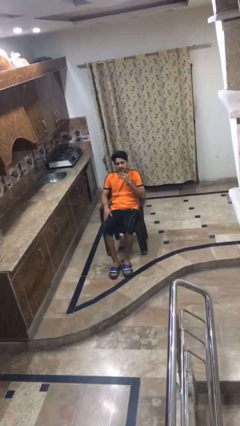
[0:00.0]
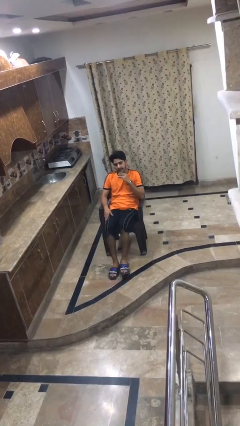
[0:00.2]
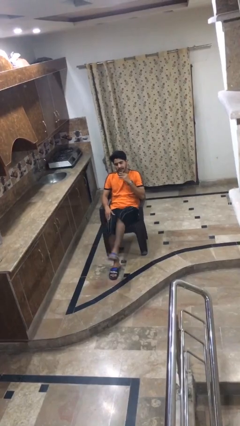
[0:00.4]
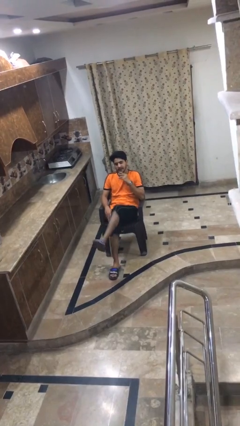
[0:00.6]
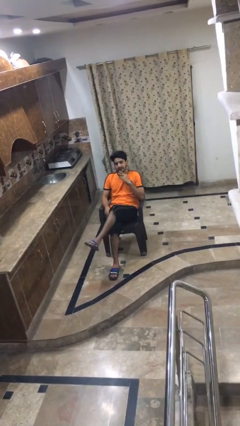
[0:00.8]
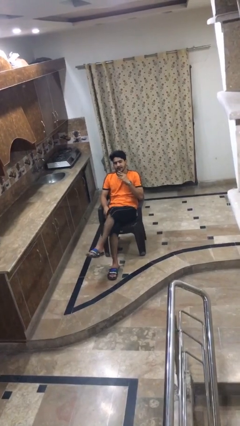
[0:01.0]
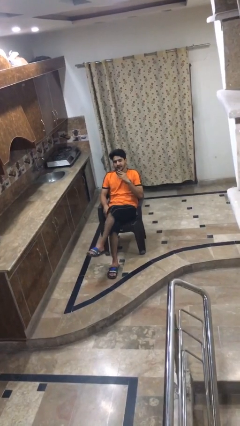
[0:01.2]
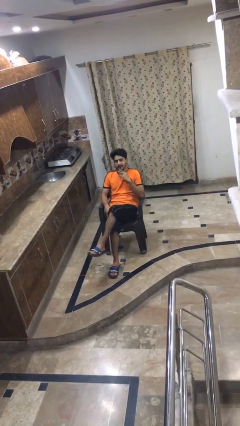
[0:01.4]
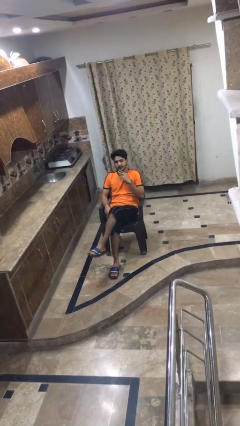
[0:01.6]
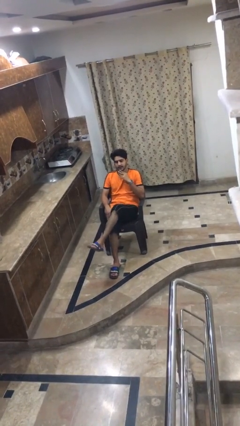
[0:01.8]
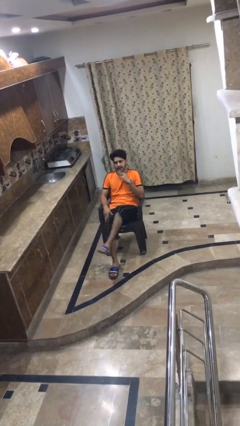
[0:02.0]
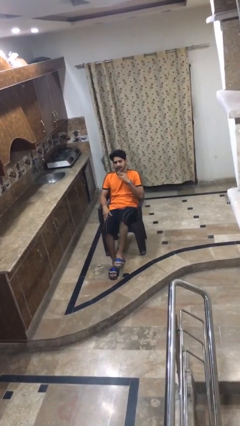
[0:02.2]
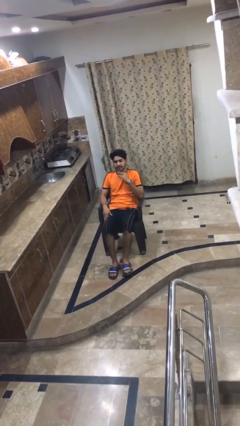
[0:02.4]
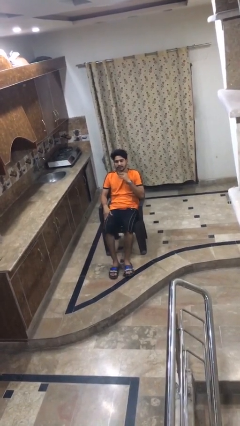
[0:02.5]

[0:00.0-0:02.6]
person crosses legs

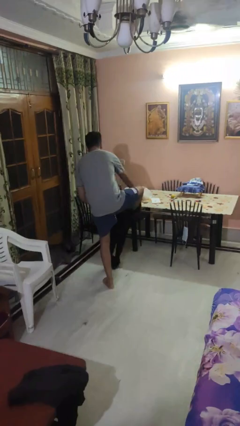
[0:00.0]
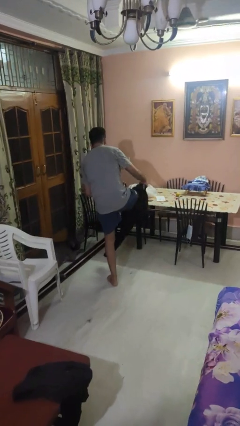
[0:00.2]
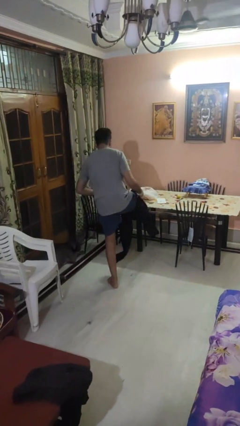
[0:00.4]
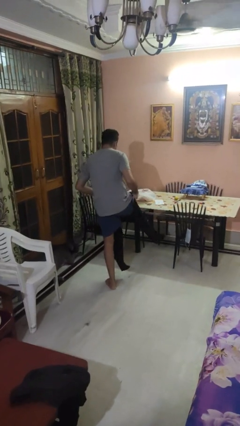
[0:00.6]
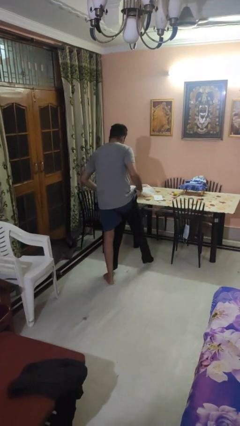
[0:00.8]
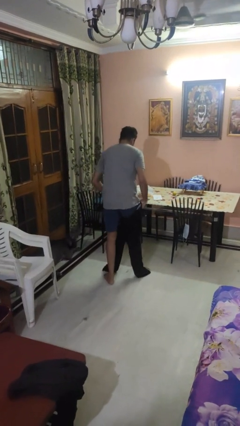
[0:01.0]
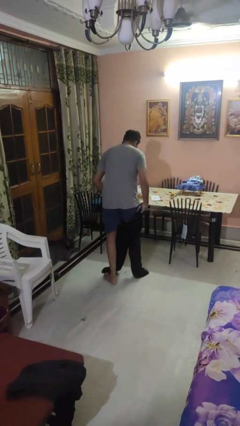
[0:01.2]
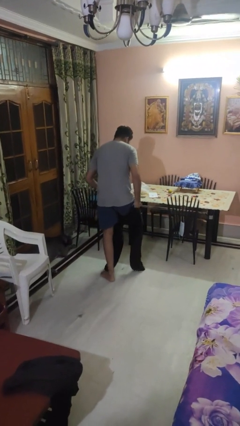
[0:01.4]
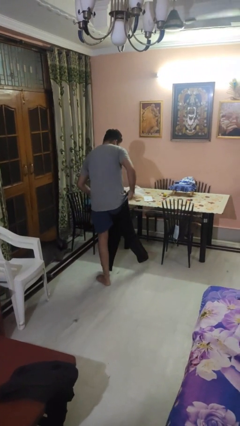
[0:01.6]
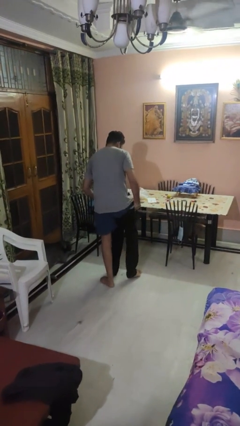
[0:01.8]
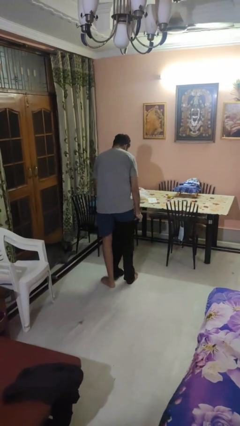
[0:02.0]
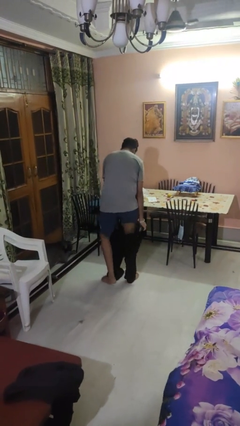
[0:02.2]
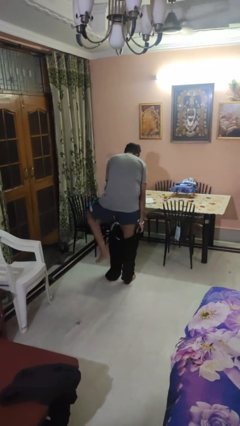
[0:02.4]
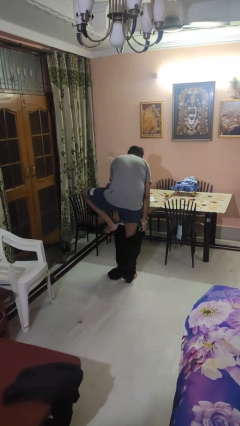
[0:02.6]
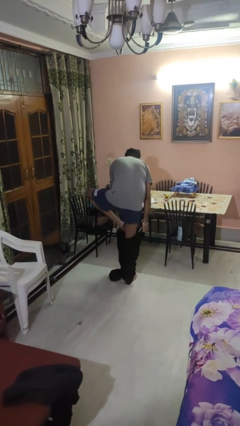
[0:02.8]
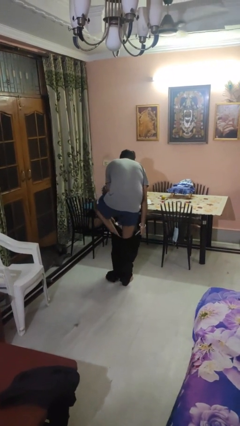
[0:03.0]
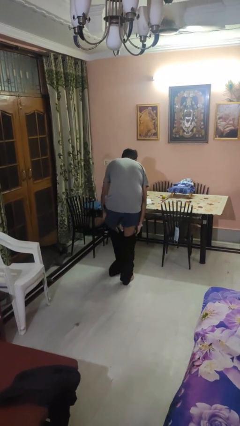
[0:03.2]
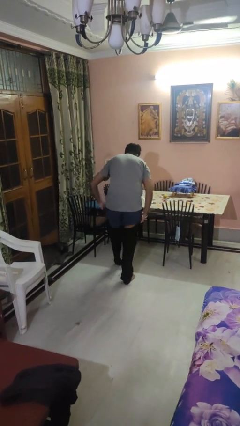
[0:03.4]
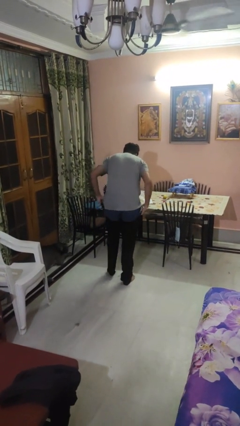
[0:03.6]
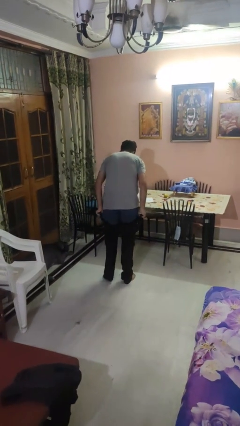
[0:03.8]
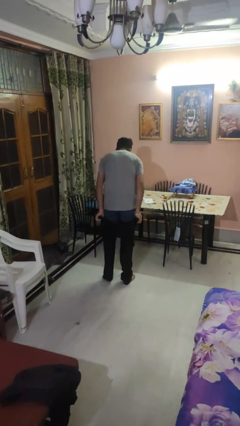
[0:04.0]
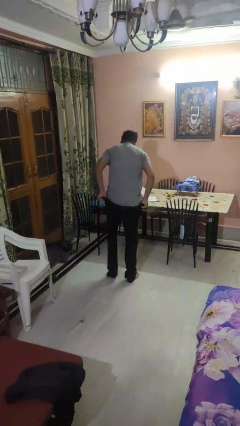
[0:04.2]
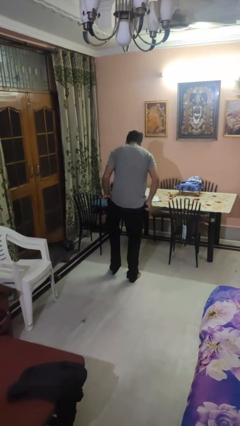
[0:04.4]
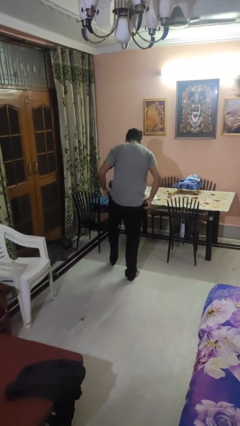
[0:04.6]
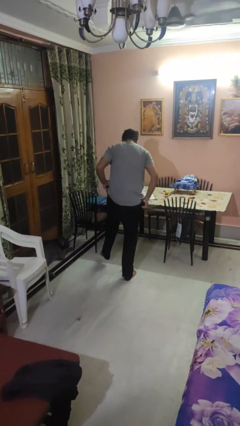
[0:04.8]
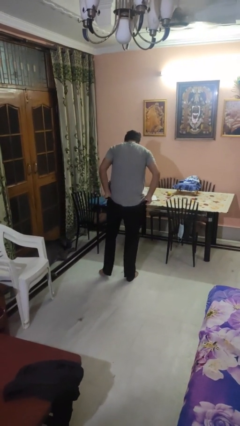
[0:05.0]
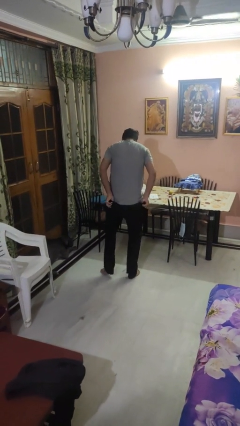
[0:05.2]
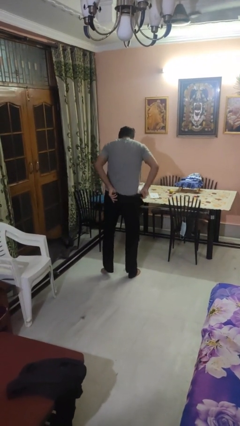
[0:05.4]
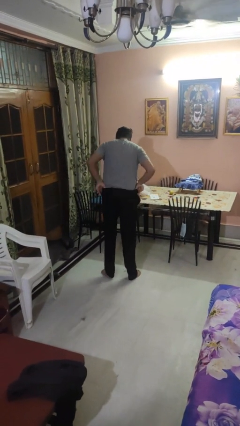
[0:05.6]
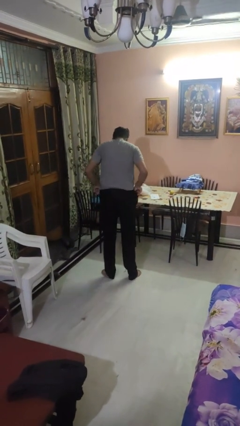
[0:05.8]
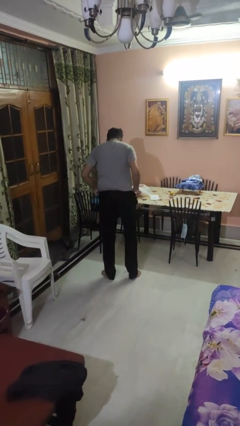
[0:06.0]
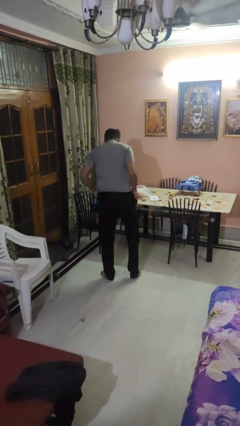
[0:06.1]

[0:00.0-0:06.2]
person puts on pants

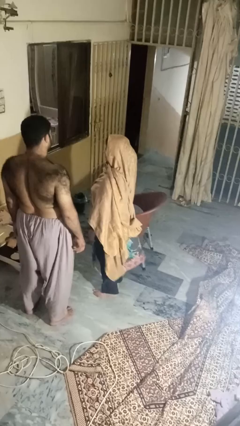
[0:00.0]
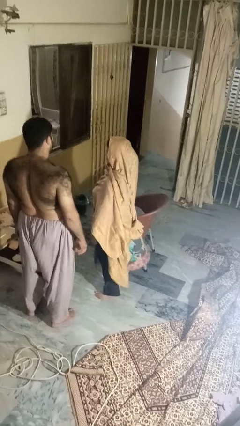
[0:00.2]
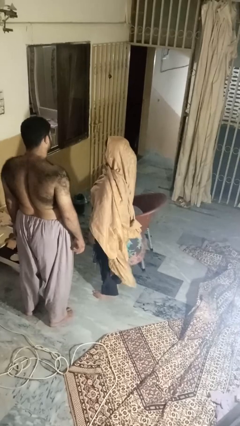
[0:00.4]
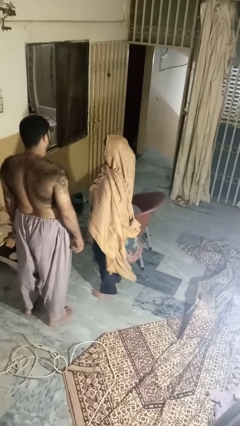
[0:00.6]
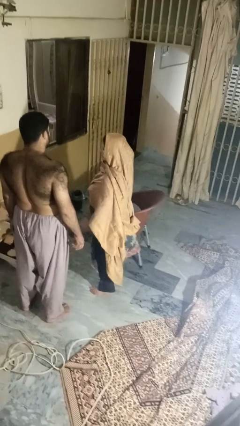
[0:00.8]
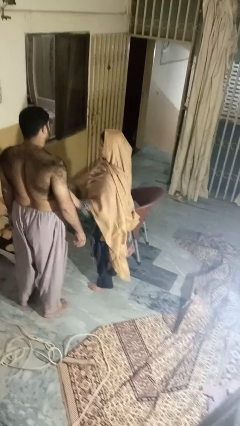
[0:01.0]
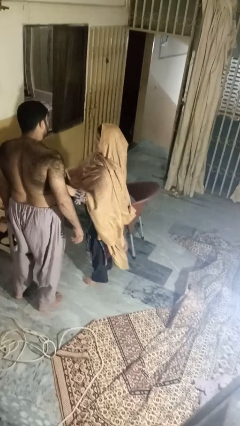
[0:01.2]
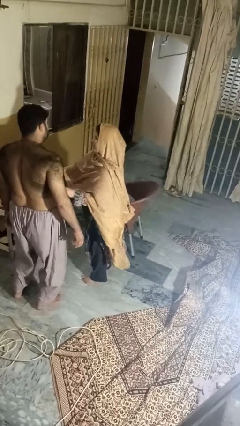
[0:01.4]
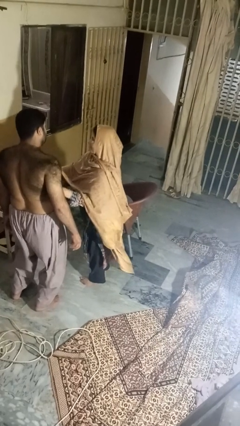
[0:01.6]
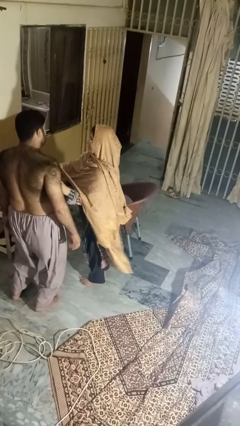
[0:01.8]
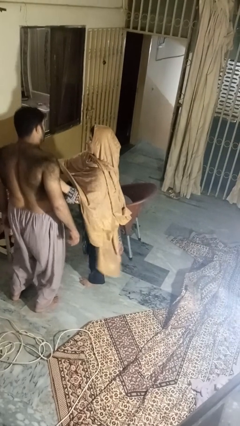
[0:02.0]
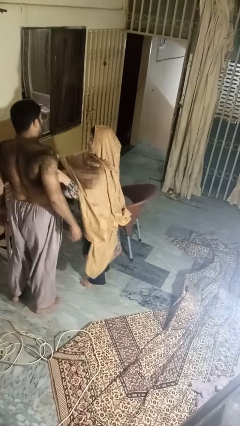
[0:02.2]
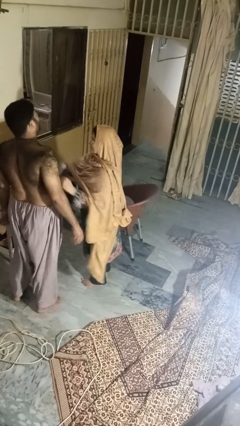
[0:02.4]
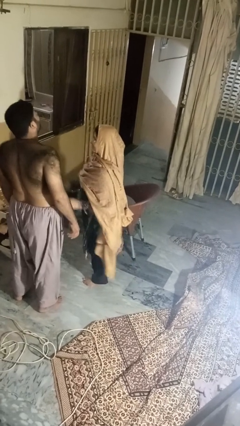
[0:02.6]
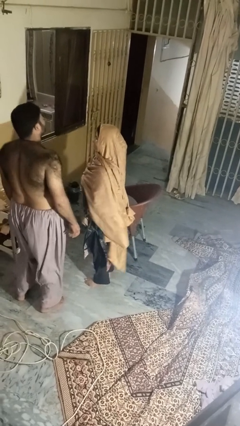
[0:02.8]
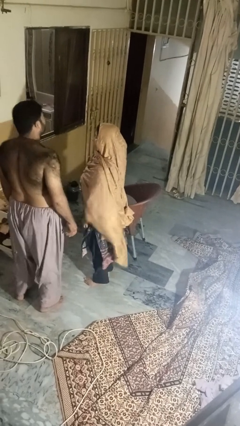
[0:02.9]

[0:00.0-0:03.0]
person tickles person

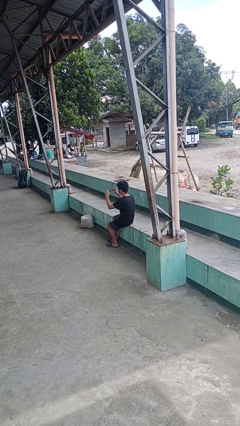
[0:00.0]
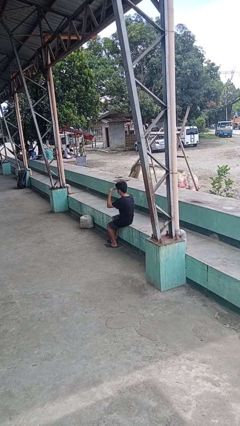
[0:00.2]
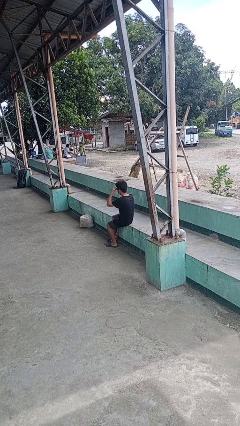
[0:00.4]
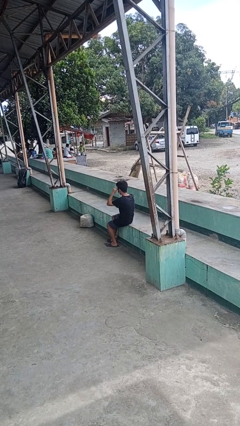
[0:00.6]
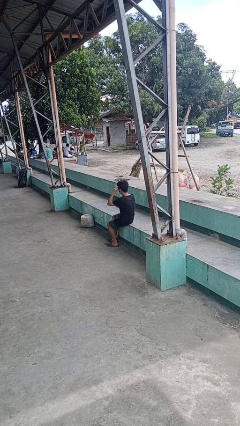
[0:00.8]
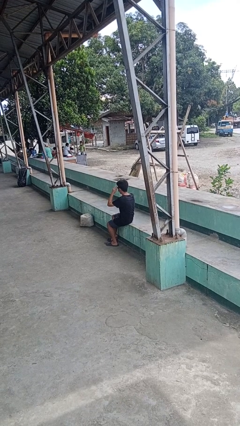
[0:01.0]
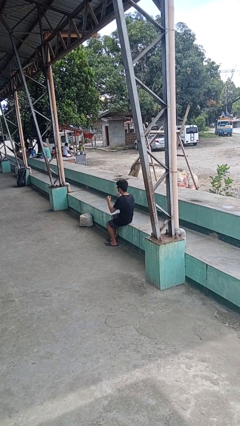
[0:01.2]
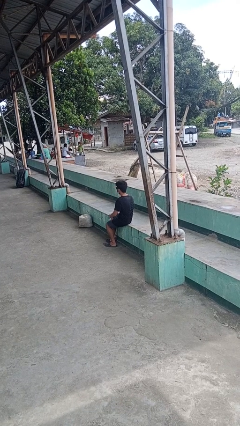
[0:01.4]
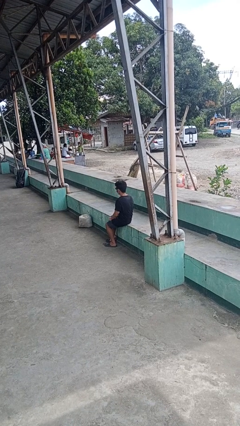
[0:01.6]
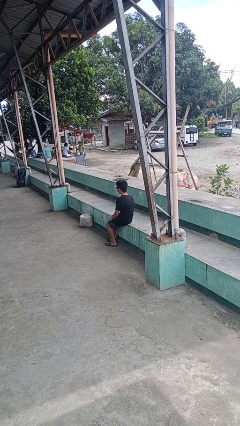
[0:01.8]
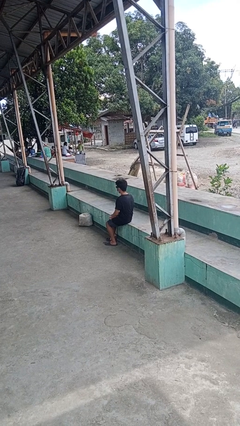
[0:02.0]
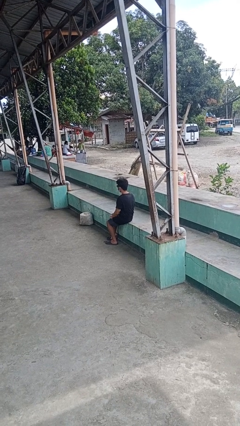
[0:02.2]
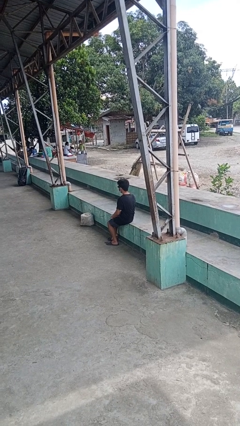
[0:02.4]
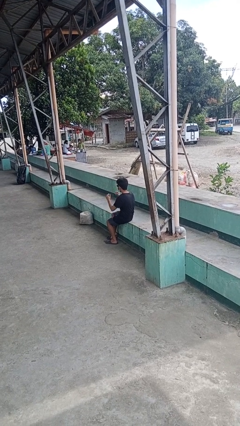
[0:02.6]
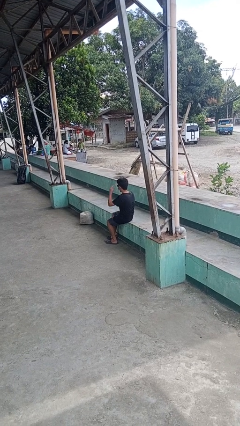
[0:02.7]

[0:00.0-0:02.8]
person puts on sunglasses

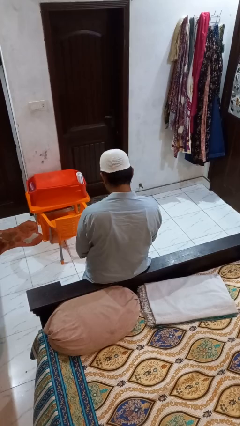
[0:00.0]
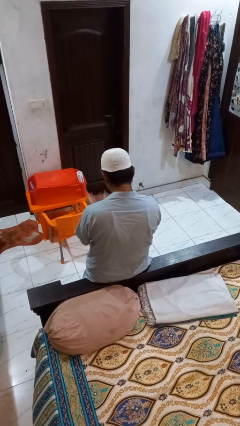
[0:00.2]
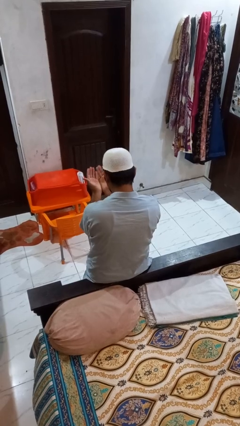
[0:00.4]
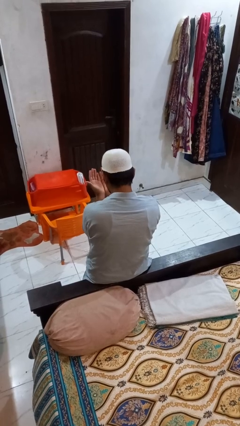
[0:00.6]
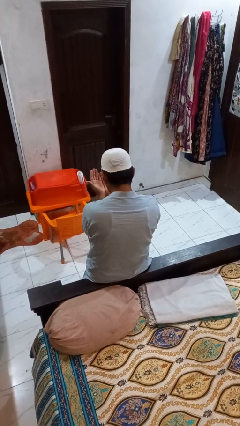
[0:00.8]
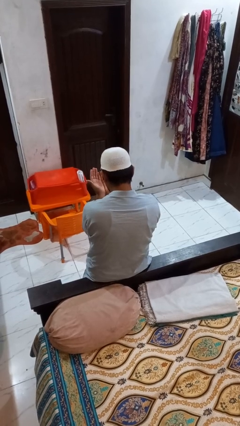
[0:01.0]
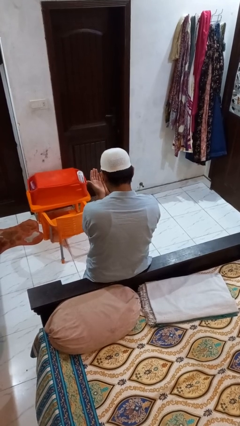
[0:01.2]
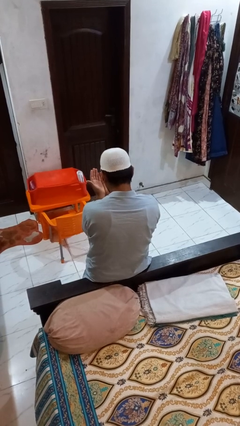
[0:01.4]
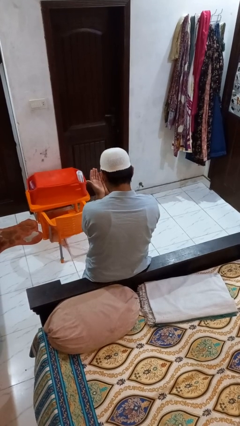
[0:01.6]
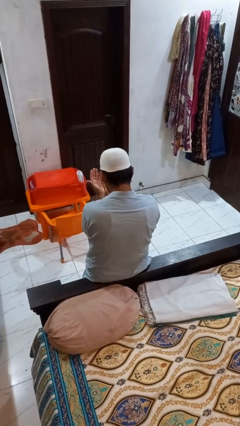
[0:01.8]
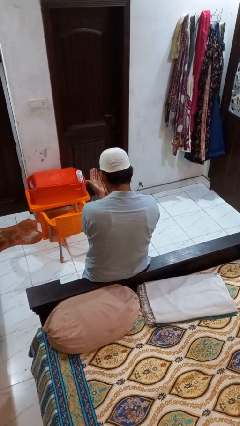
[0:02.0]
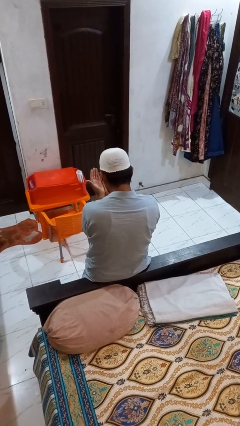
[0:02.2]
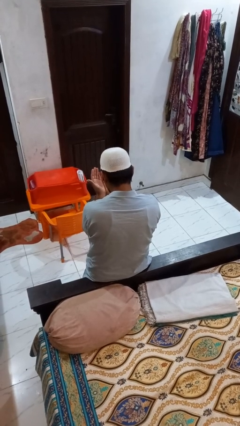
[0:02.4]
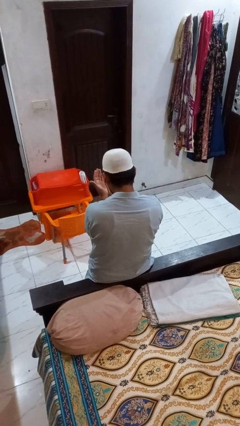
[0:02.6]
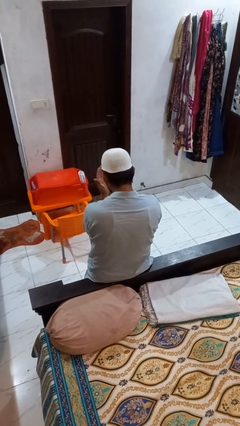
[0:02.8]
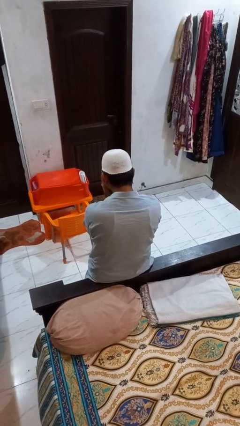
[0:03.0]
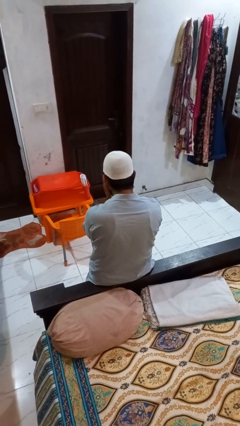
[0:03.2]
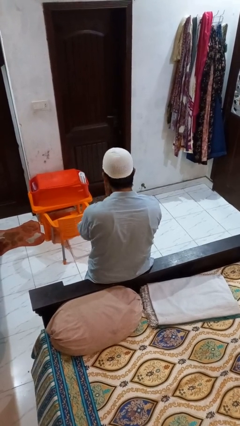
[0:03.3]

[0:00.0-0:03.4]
person prays
